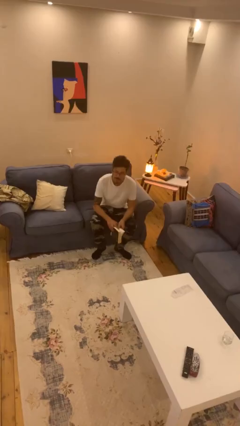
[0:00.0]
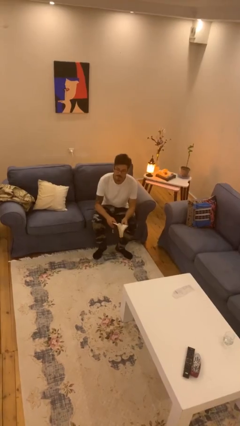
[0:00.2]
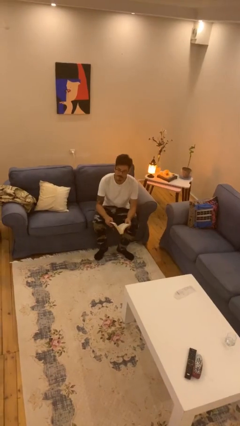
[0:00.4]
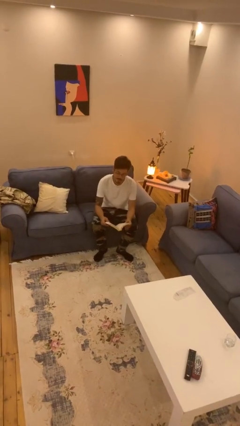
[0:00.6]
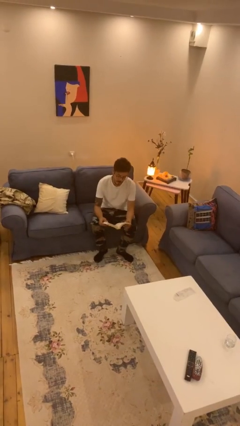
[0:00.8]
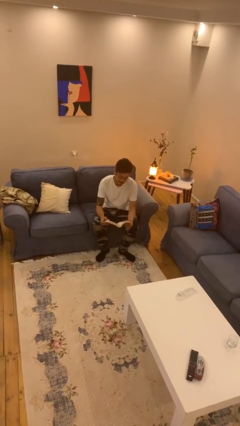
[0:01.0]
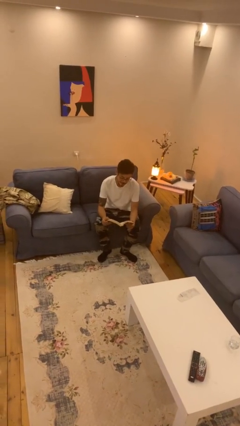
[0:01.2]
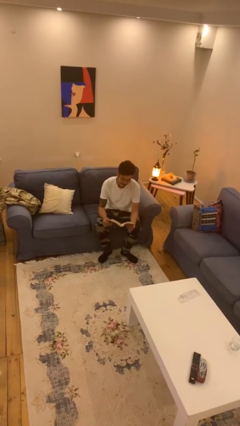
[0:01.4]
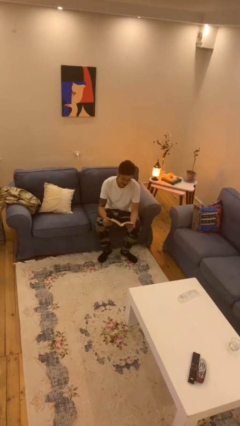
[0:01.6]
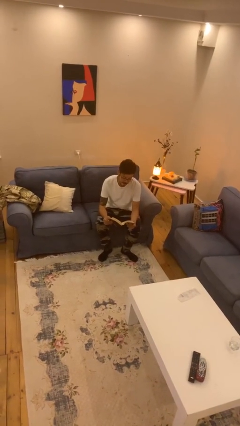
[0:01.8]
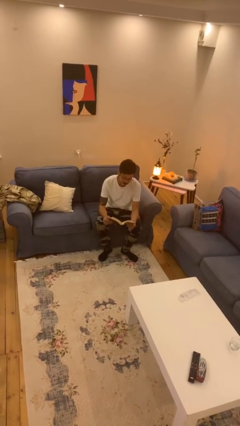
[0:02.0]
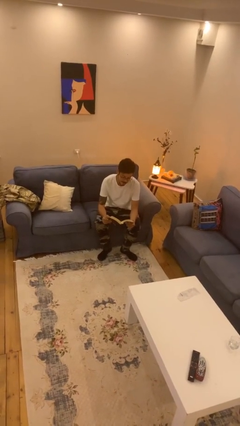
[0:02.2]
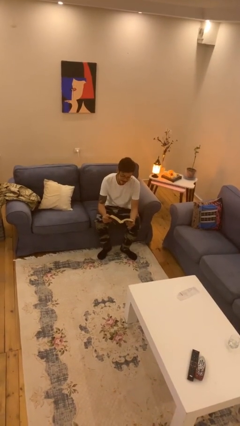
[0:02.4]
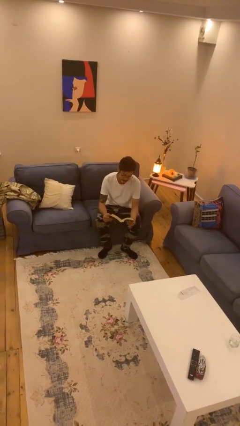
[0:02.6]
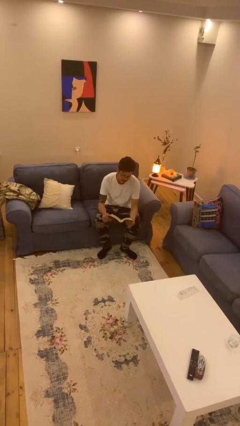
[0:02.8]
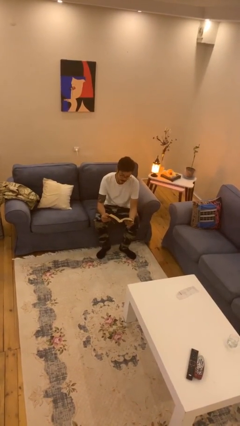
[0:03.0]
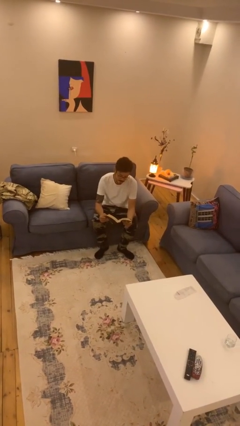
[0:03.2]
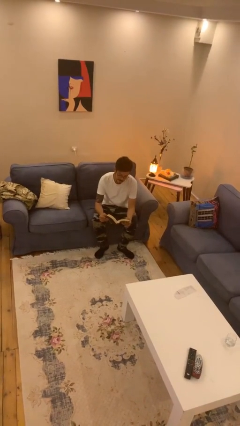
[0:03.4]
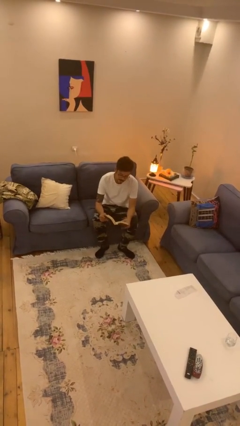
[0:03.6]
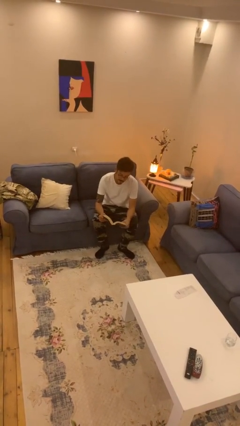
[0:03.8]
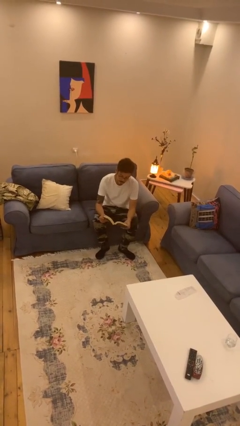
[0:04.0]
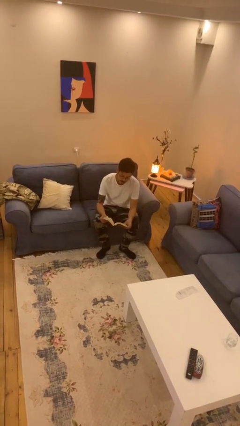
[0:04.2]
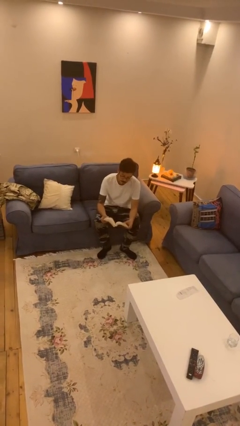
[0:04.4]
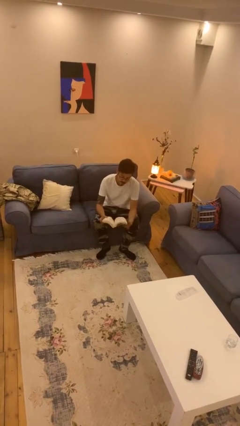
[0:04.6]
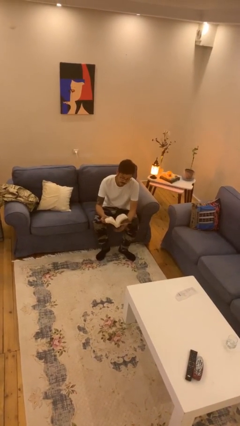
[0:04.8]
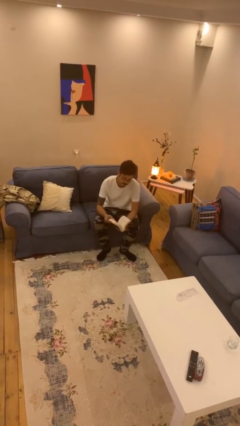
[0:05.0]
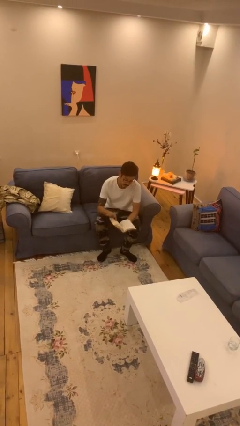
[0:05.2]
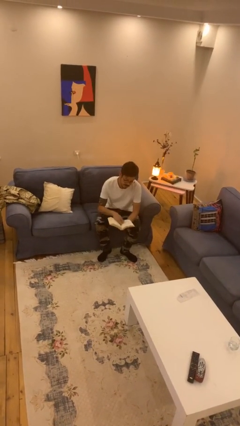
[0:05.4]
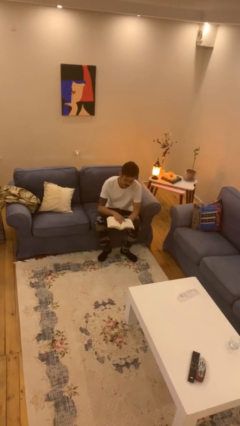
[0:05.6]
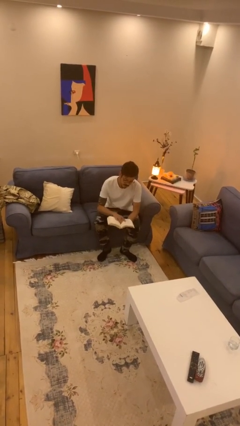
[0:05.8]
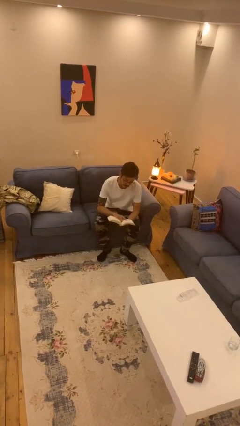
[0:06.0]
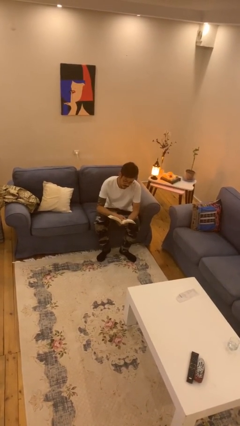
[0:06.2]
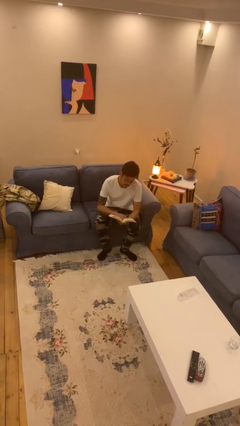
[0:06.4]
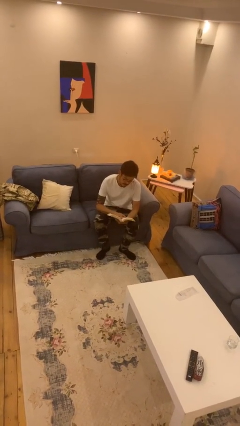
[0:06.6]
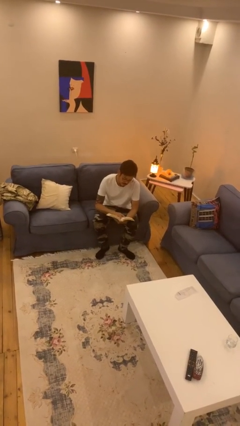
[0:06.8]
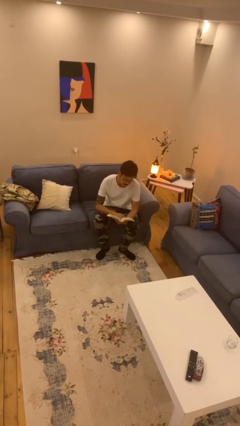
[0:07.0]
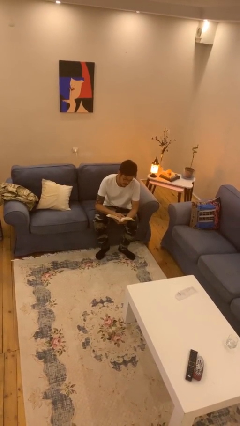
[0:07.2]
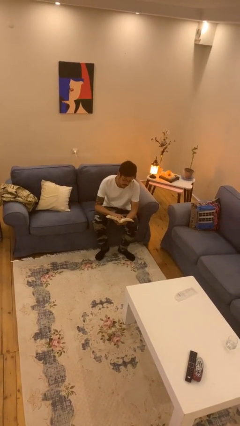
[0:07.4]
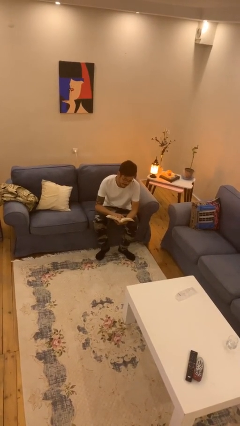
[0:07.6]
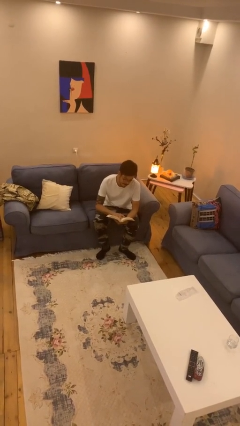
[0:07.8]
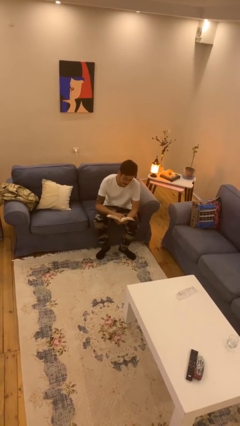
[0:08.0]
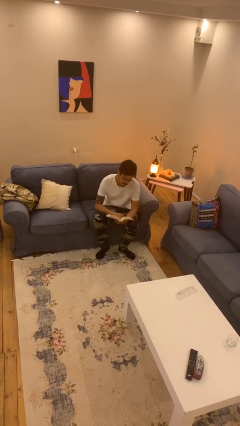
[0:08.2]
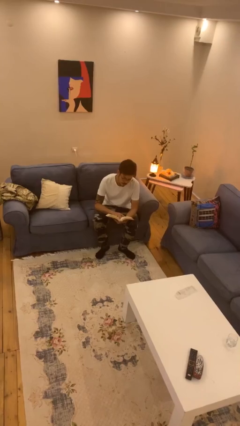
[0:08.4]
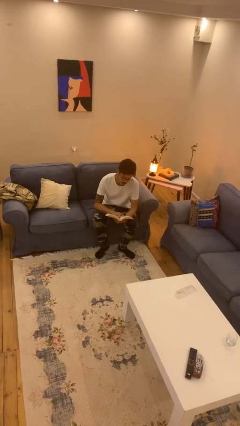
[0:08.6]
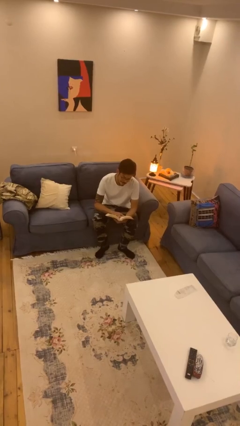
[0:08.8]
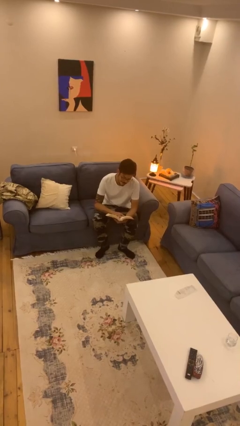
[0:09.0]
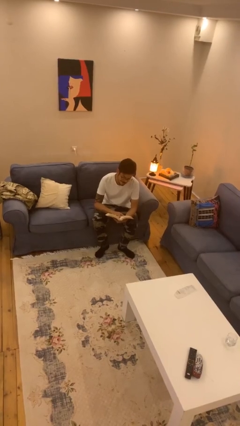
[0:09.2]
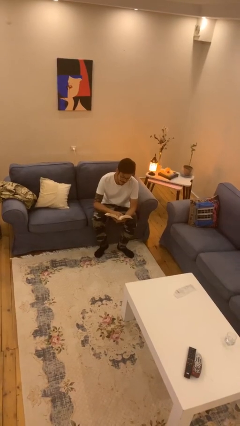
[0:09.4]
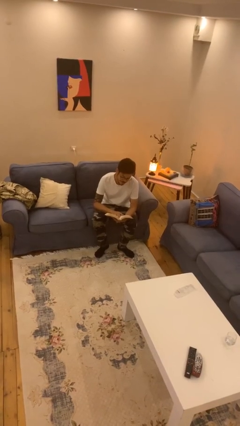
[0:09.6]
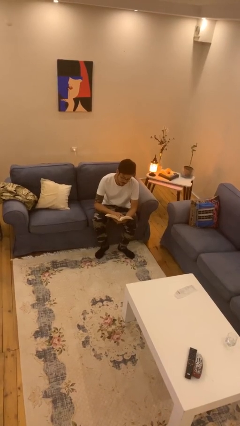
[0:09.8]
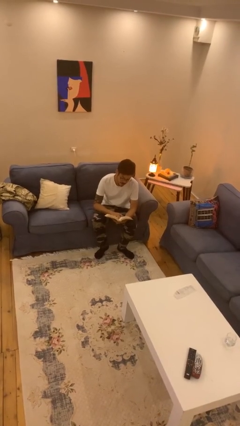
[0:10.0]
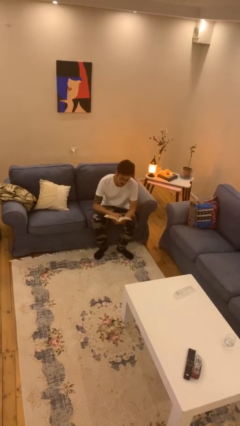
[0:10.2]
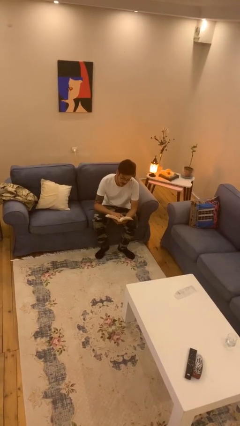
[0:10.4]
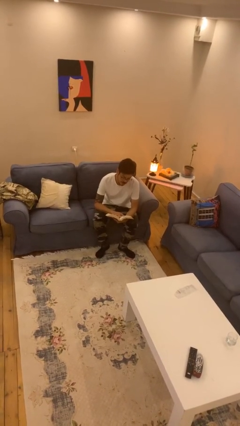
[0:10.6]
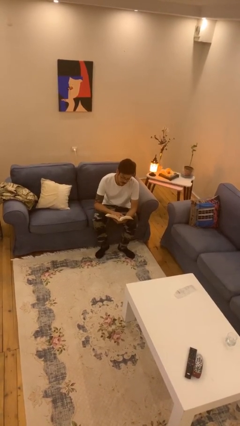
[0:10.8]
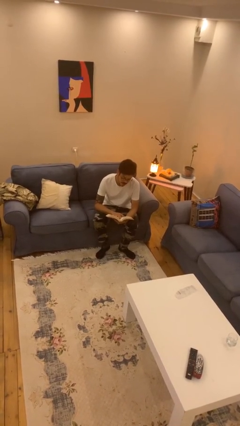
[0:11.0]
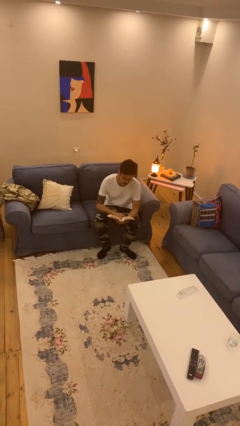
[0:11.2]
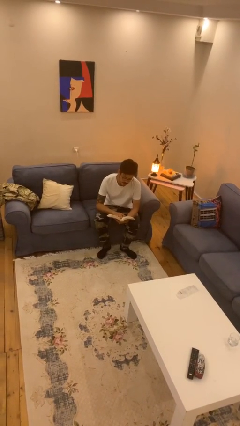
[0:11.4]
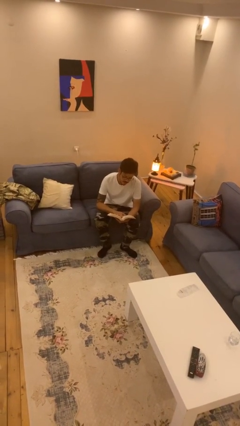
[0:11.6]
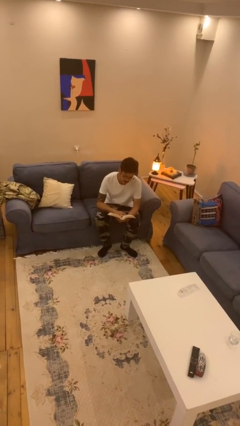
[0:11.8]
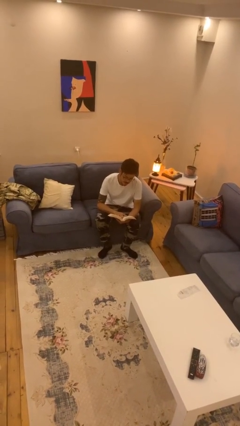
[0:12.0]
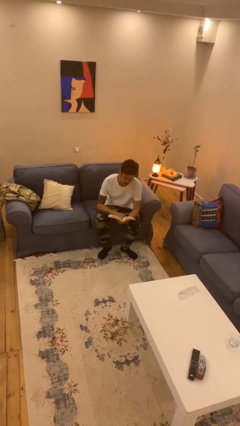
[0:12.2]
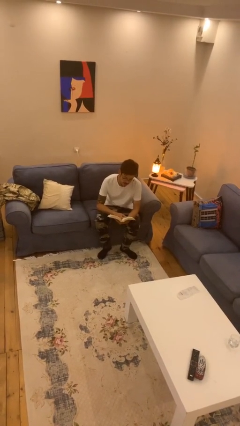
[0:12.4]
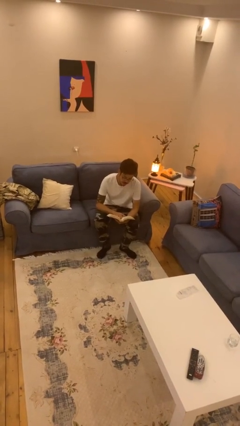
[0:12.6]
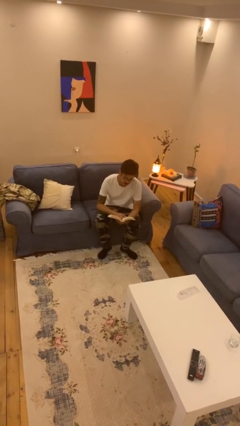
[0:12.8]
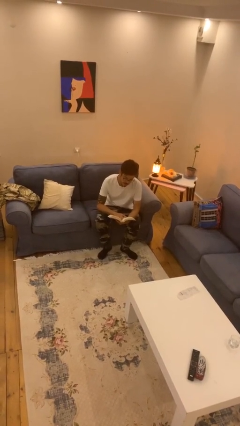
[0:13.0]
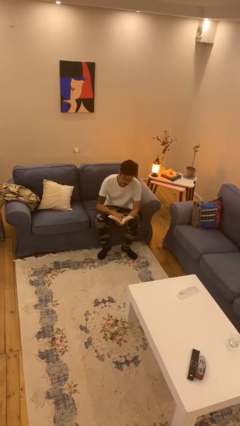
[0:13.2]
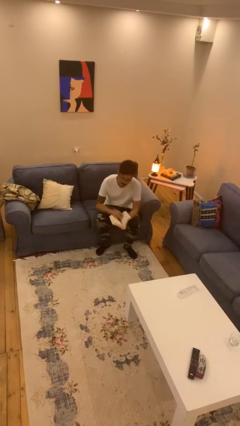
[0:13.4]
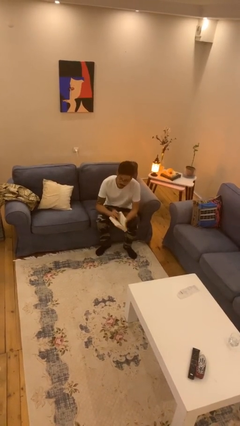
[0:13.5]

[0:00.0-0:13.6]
person reads document

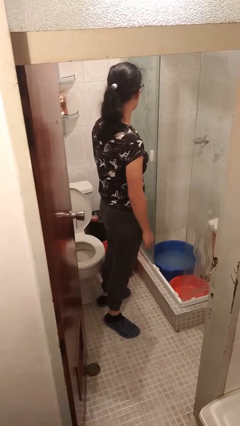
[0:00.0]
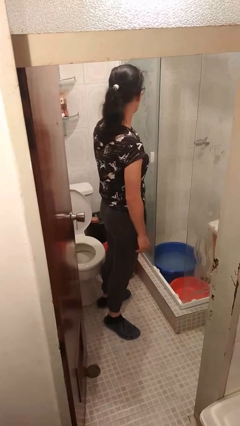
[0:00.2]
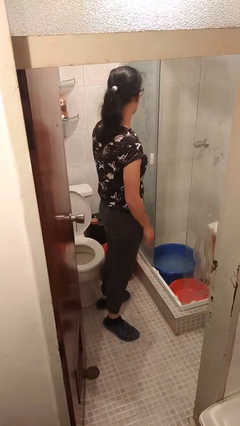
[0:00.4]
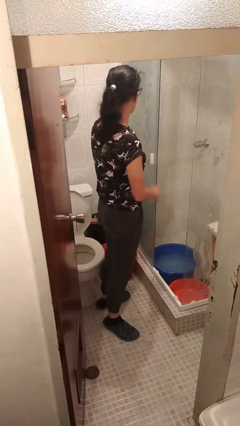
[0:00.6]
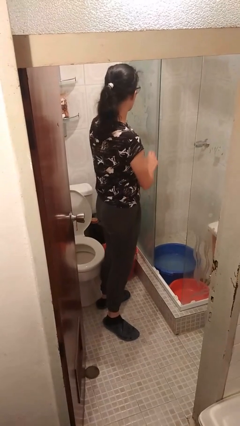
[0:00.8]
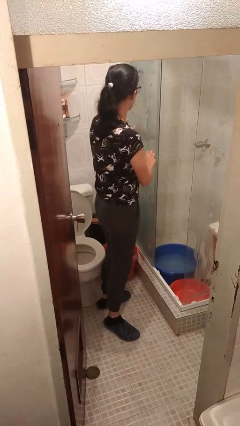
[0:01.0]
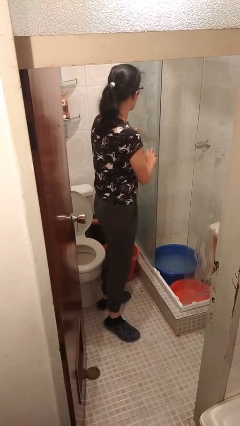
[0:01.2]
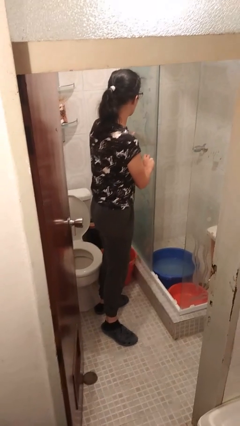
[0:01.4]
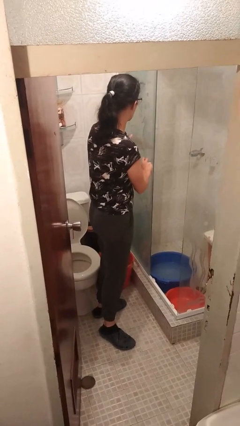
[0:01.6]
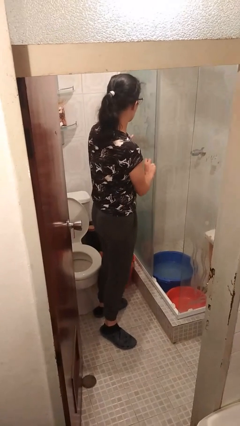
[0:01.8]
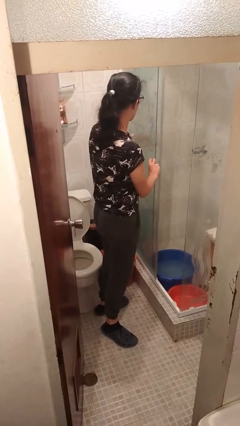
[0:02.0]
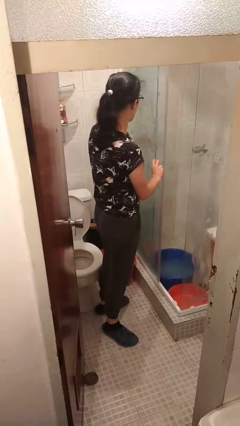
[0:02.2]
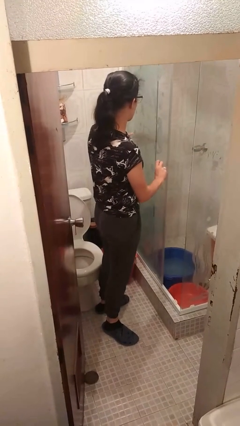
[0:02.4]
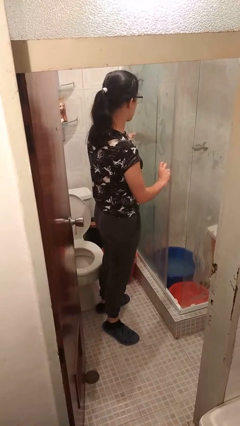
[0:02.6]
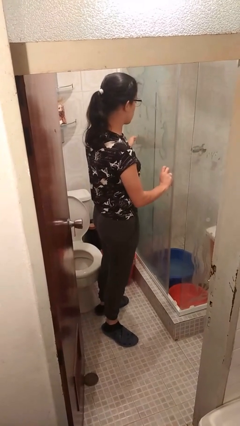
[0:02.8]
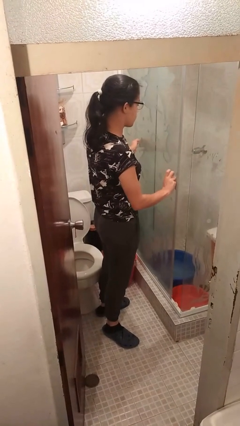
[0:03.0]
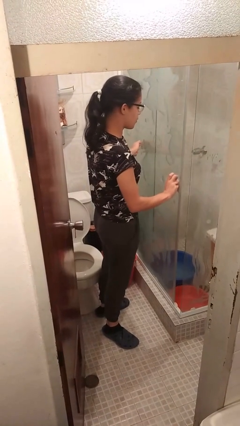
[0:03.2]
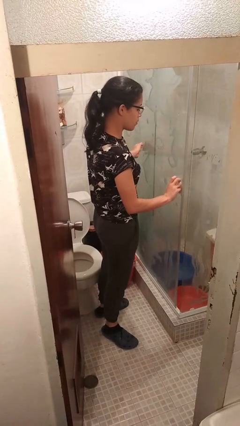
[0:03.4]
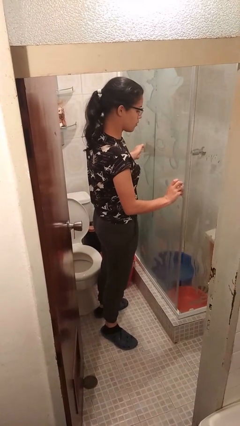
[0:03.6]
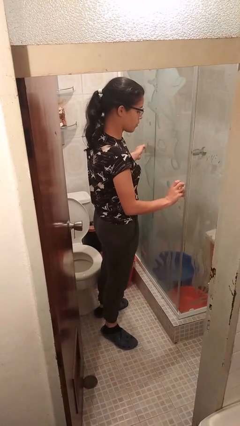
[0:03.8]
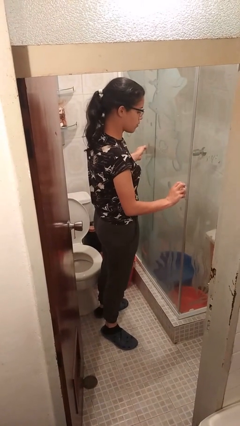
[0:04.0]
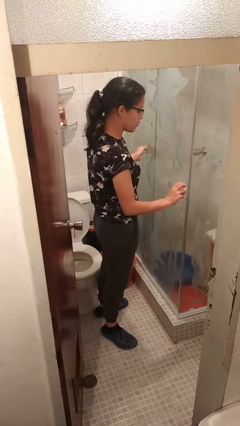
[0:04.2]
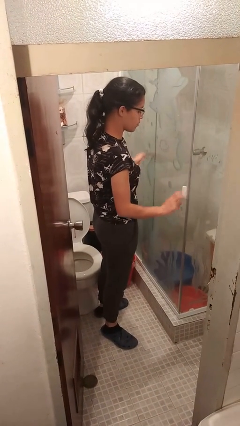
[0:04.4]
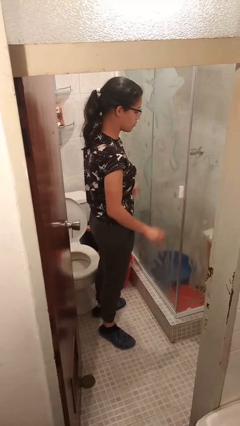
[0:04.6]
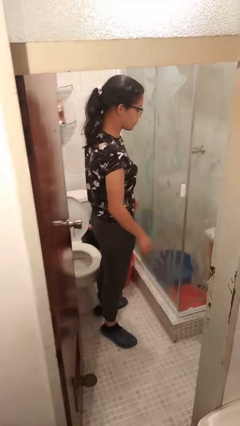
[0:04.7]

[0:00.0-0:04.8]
person closes sliding door
